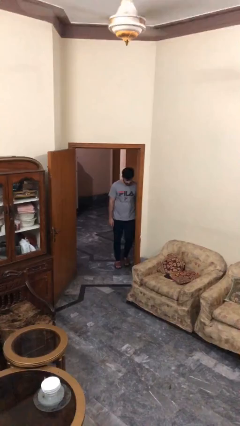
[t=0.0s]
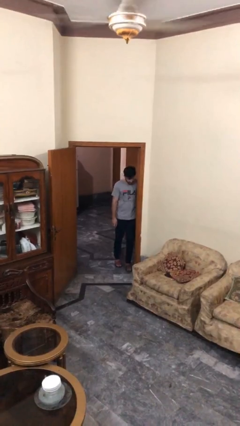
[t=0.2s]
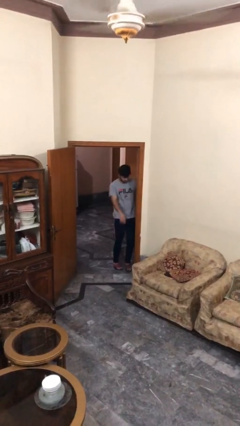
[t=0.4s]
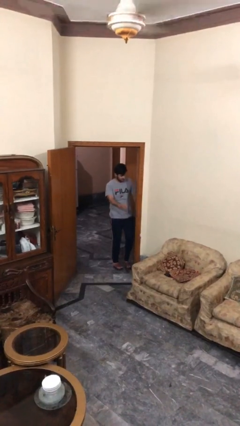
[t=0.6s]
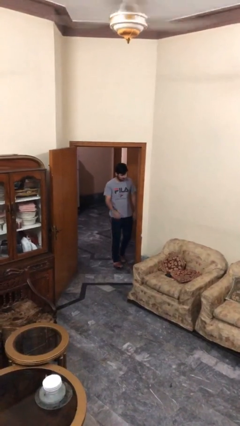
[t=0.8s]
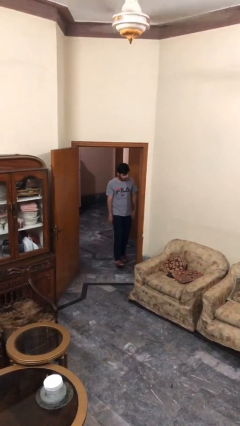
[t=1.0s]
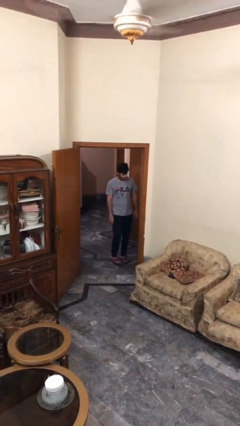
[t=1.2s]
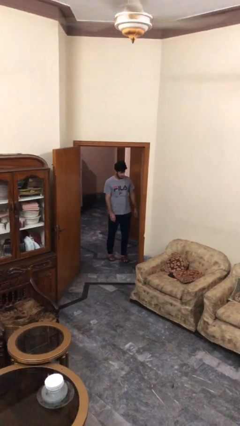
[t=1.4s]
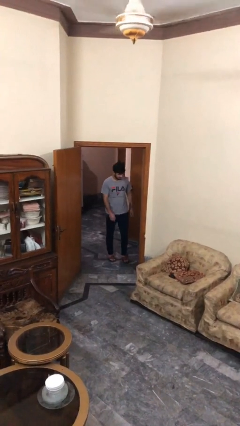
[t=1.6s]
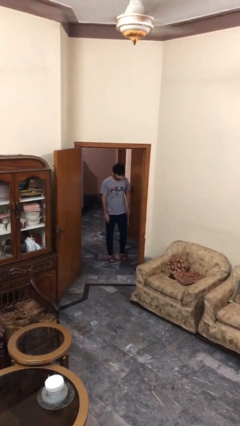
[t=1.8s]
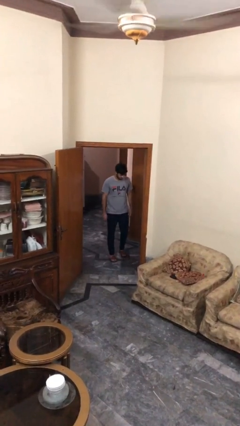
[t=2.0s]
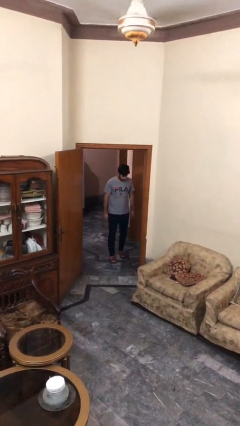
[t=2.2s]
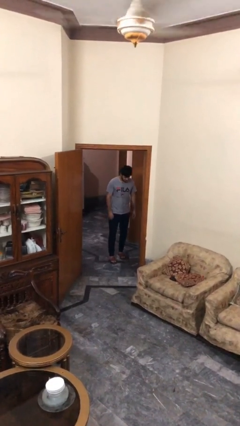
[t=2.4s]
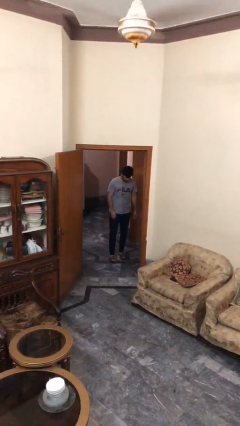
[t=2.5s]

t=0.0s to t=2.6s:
person bumps into wall

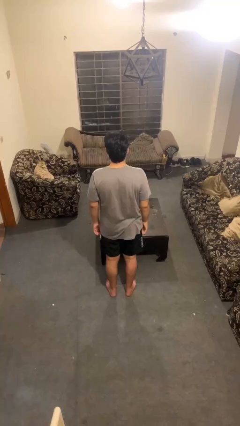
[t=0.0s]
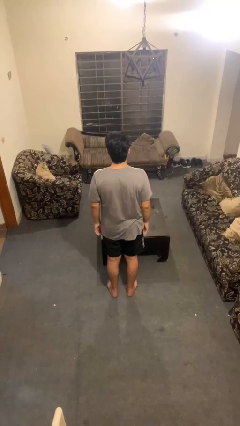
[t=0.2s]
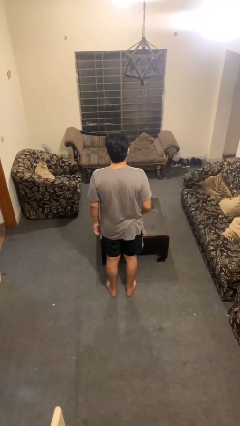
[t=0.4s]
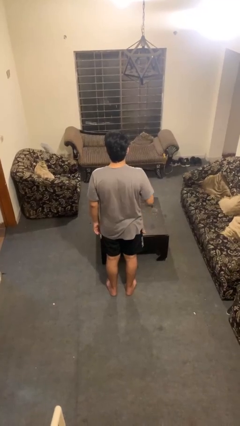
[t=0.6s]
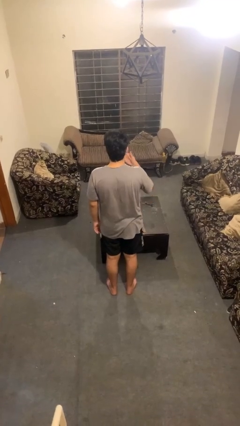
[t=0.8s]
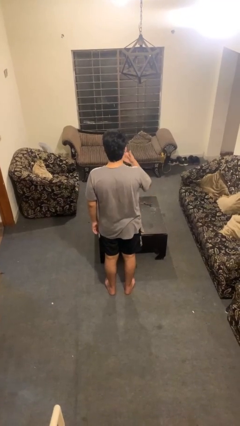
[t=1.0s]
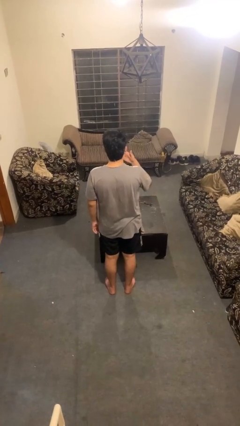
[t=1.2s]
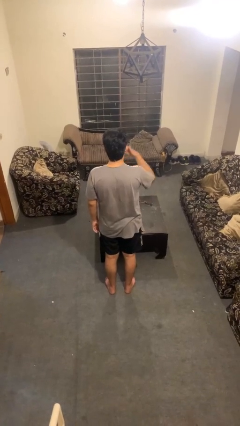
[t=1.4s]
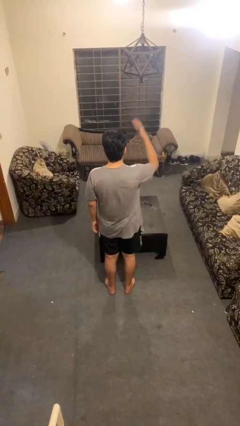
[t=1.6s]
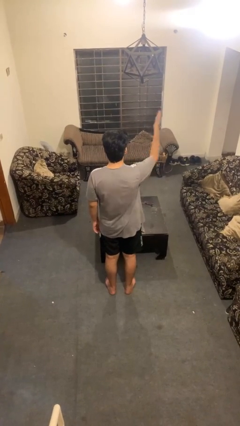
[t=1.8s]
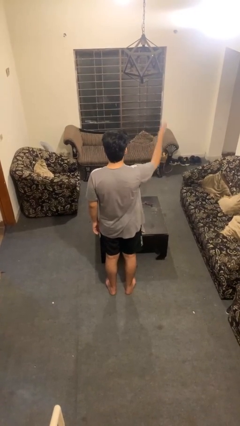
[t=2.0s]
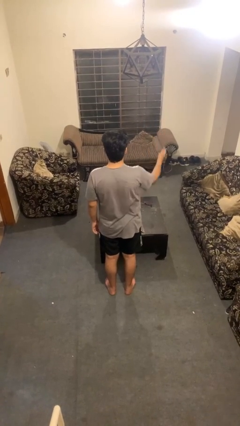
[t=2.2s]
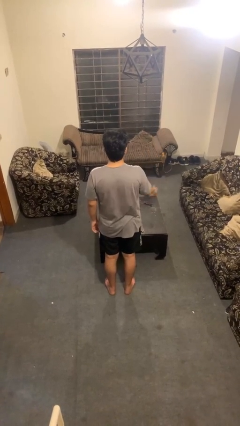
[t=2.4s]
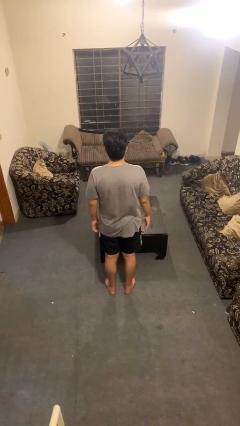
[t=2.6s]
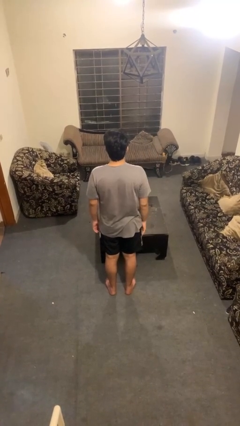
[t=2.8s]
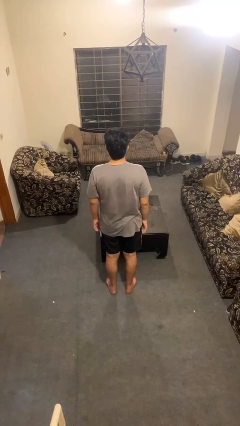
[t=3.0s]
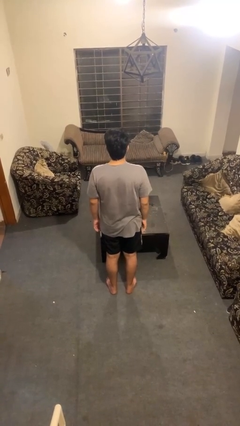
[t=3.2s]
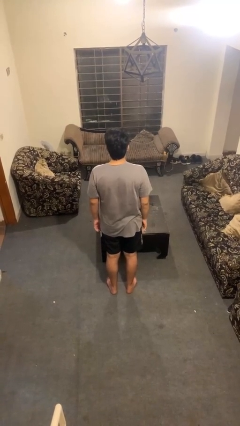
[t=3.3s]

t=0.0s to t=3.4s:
person gestures blow kiss

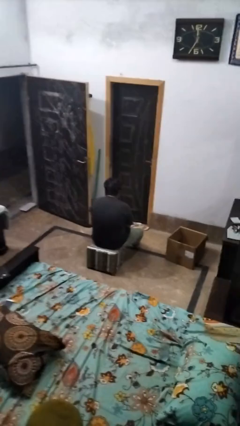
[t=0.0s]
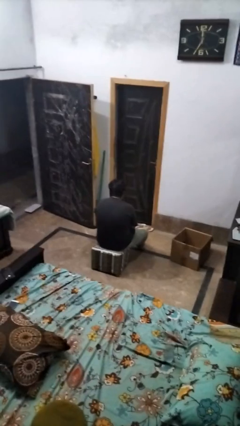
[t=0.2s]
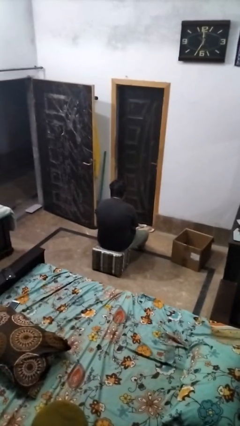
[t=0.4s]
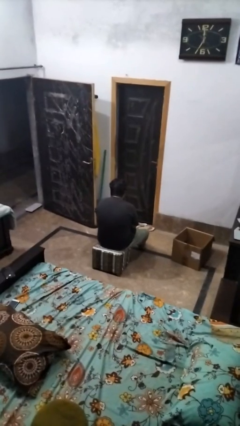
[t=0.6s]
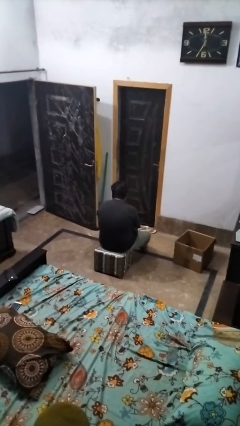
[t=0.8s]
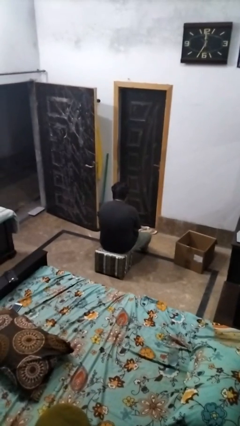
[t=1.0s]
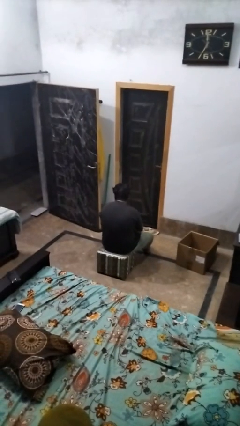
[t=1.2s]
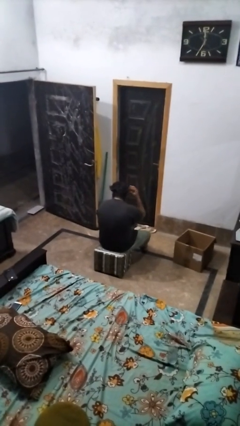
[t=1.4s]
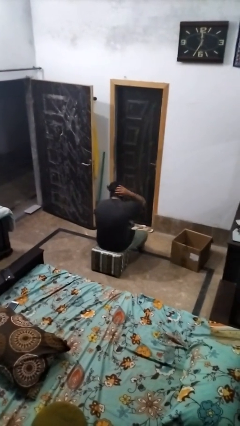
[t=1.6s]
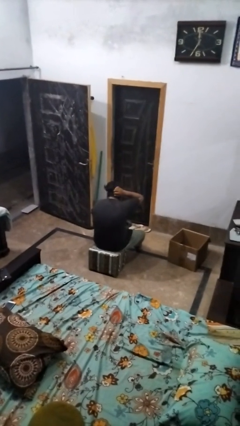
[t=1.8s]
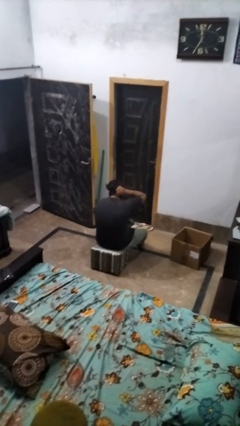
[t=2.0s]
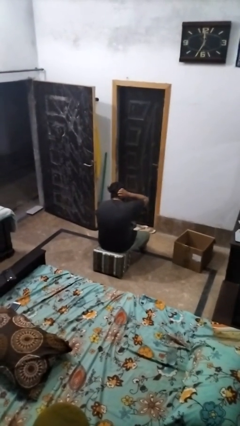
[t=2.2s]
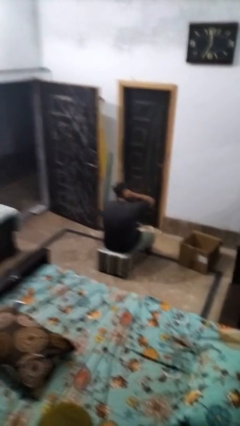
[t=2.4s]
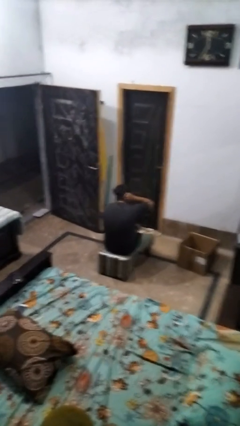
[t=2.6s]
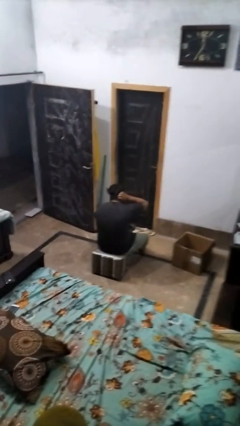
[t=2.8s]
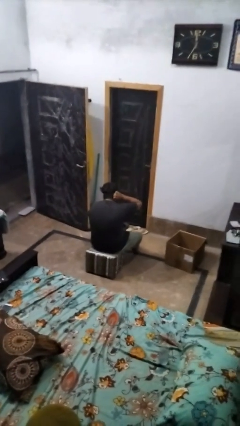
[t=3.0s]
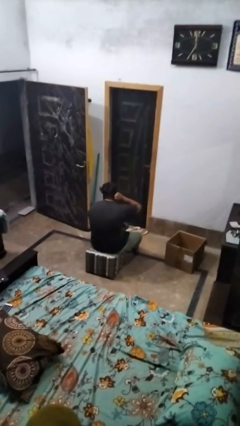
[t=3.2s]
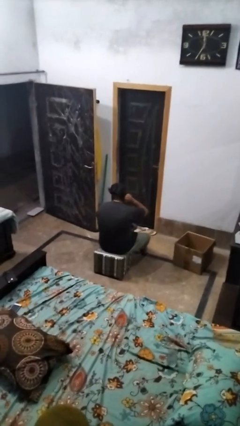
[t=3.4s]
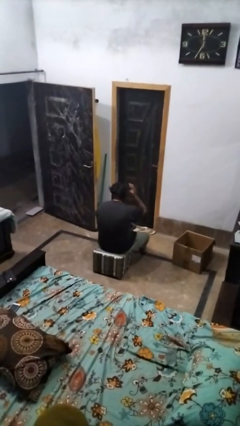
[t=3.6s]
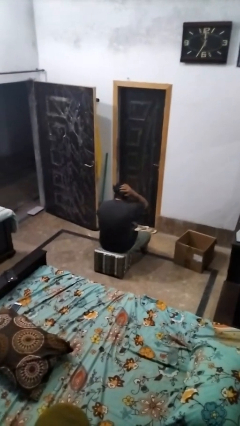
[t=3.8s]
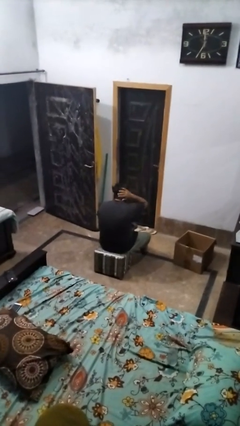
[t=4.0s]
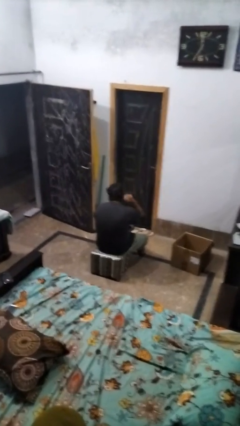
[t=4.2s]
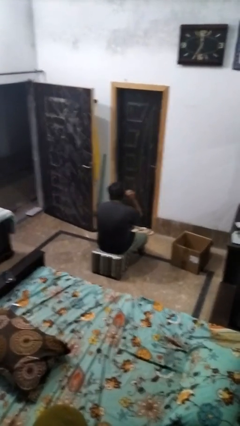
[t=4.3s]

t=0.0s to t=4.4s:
person strokes hair

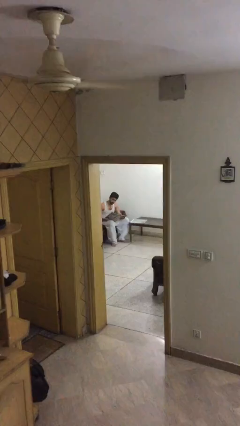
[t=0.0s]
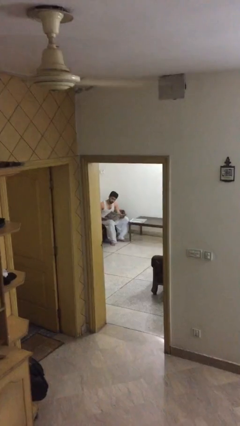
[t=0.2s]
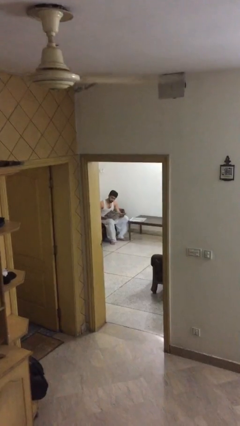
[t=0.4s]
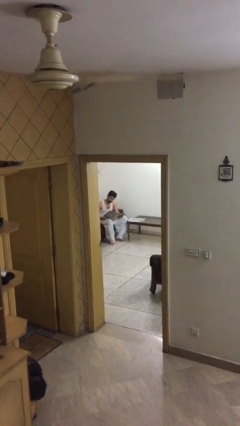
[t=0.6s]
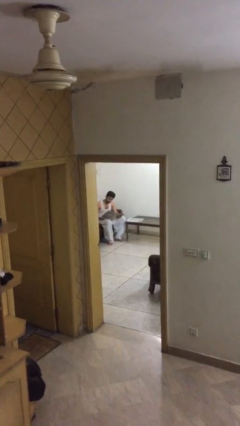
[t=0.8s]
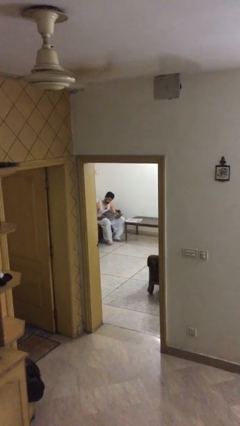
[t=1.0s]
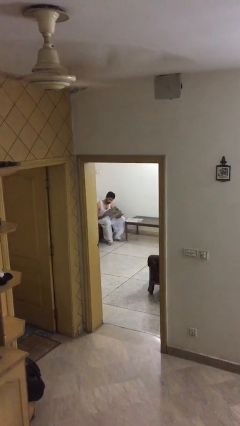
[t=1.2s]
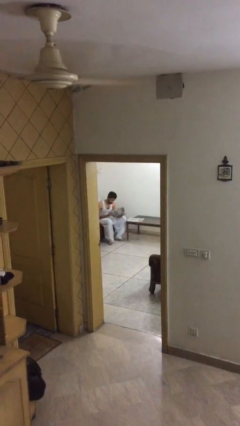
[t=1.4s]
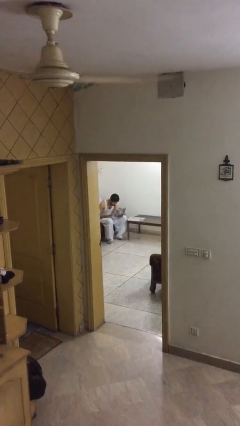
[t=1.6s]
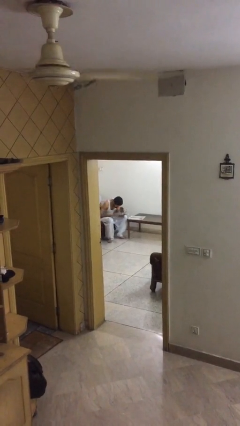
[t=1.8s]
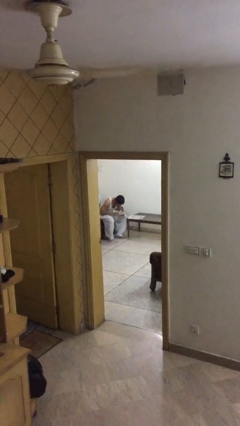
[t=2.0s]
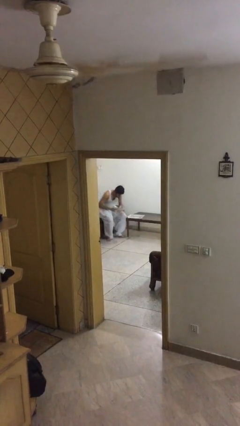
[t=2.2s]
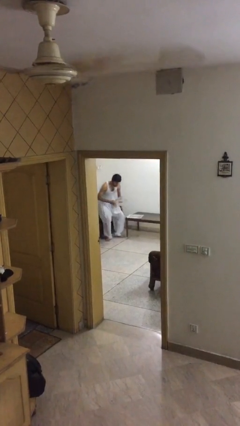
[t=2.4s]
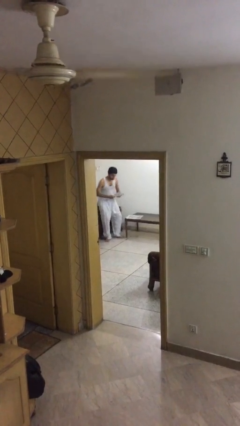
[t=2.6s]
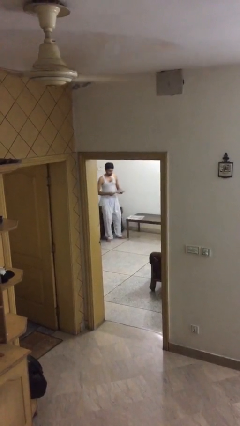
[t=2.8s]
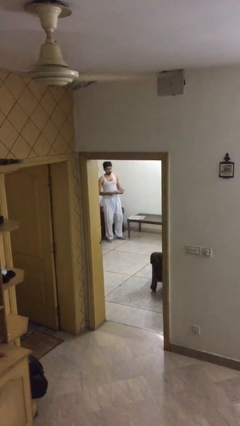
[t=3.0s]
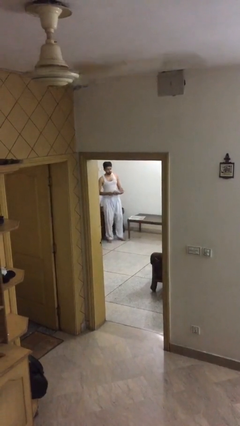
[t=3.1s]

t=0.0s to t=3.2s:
person stands up

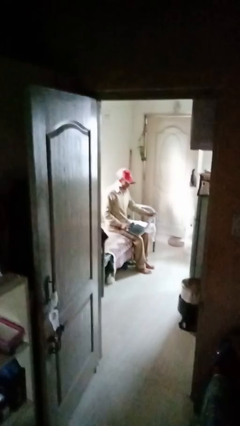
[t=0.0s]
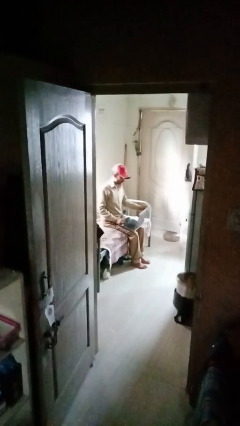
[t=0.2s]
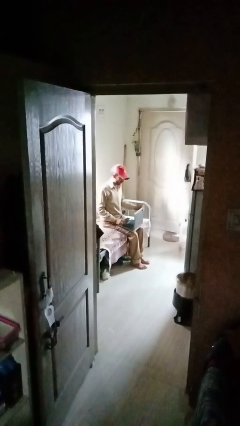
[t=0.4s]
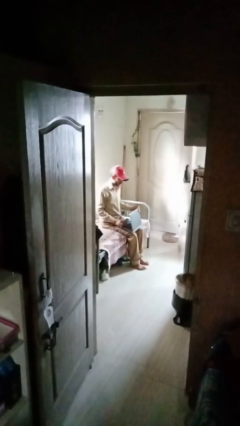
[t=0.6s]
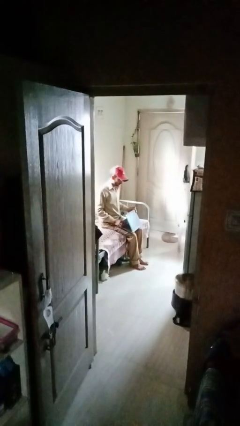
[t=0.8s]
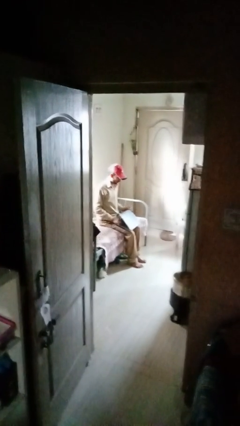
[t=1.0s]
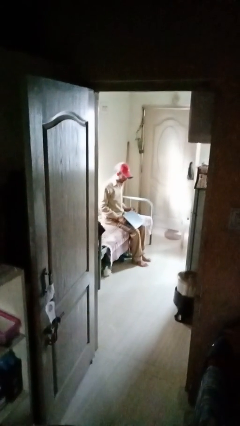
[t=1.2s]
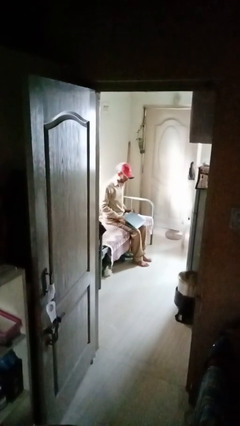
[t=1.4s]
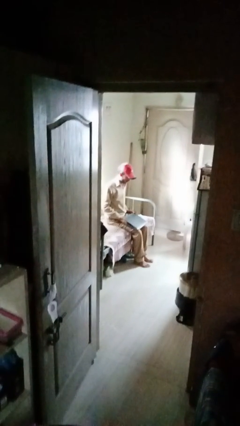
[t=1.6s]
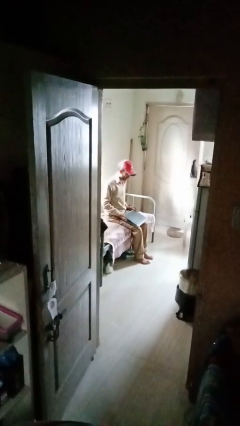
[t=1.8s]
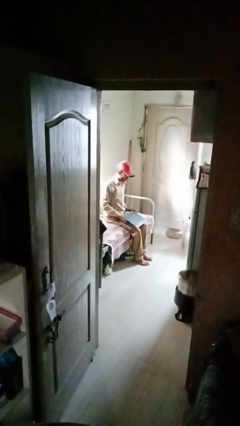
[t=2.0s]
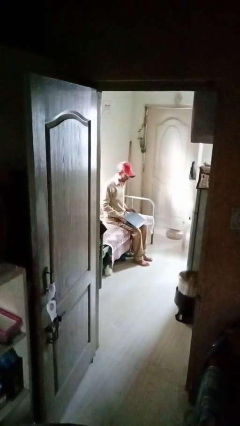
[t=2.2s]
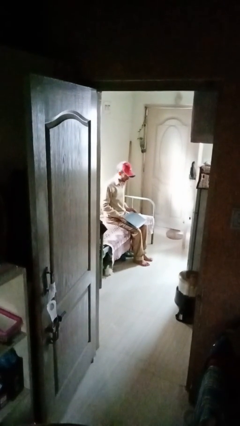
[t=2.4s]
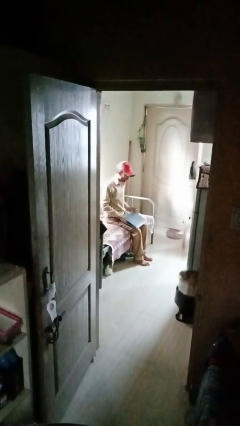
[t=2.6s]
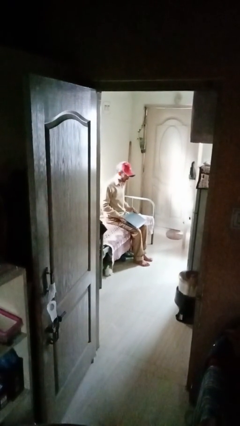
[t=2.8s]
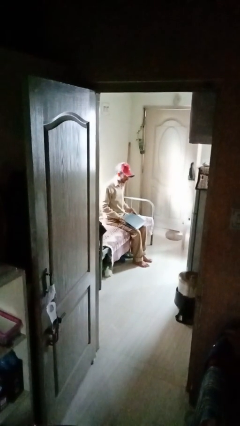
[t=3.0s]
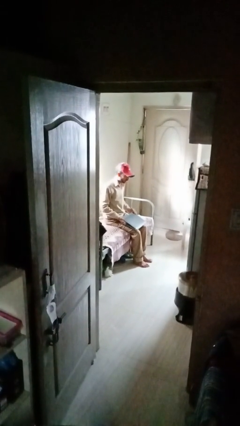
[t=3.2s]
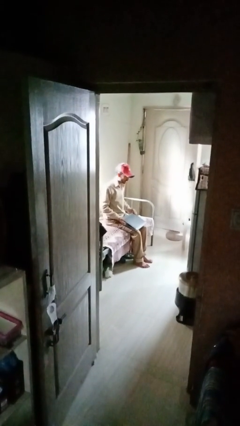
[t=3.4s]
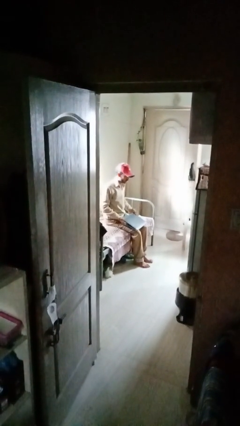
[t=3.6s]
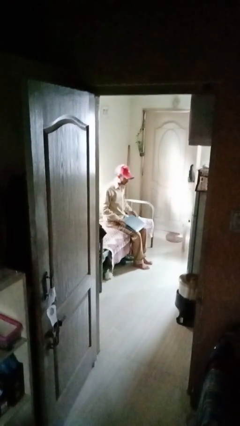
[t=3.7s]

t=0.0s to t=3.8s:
person closes laptop
